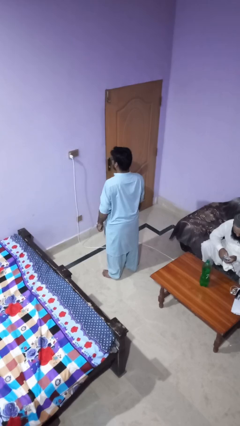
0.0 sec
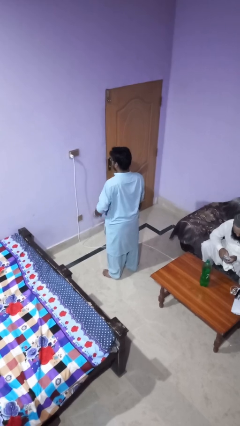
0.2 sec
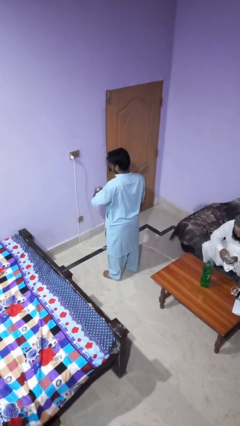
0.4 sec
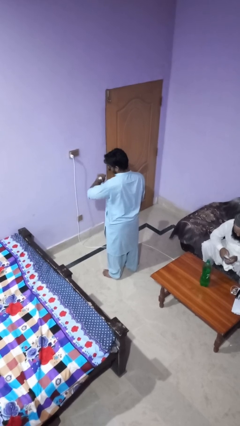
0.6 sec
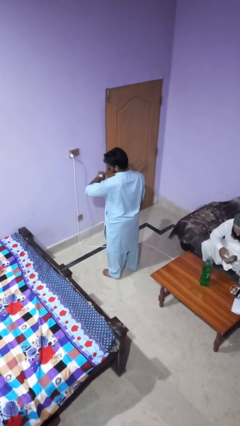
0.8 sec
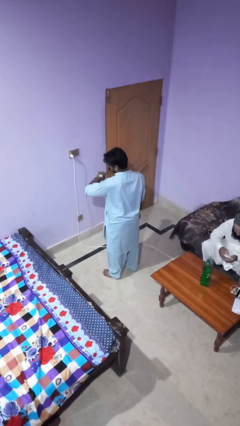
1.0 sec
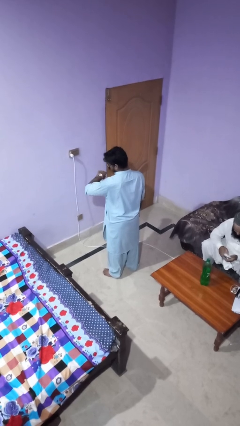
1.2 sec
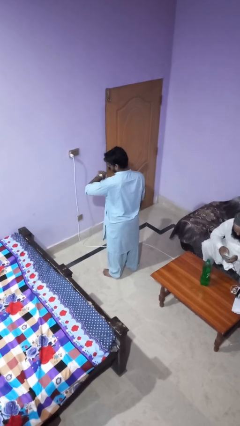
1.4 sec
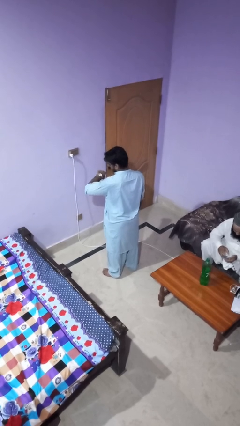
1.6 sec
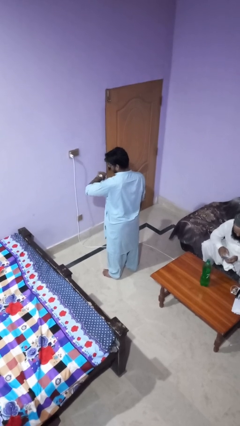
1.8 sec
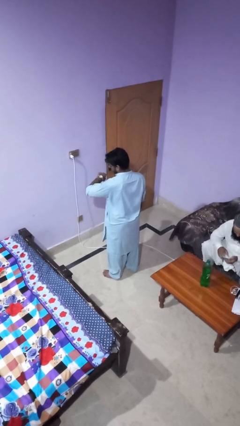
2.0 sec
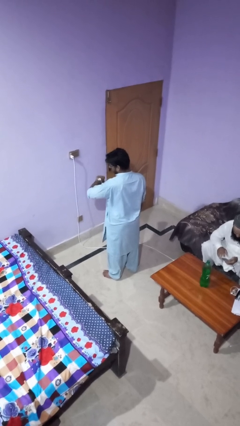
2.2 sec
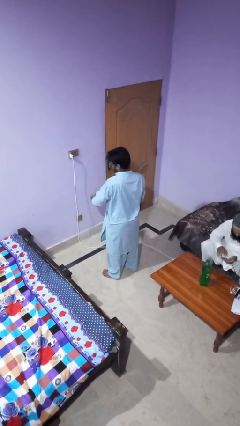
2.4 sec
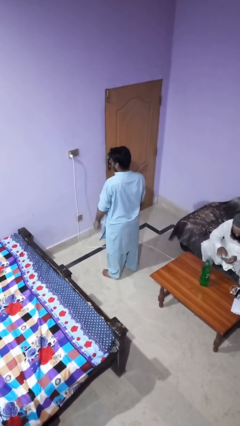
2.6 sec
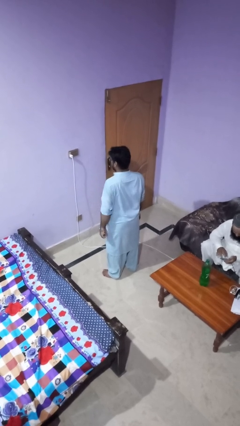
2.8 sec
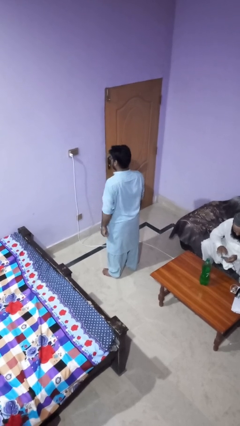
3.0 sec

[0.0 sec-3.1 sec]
person looks at wristwatch

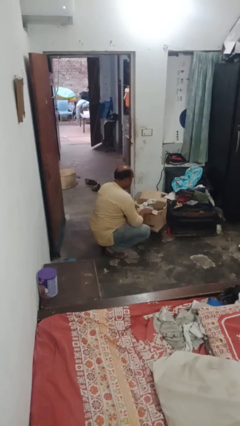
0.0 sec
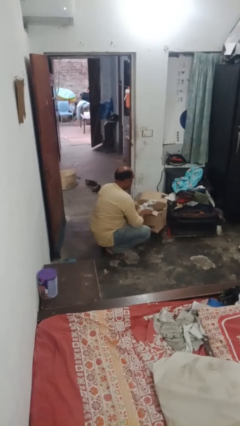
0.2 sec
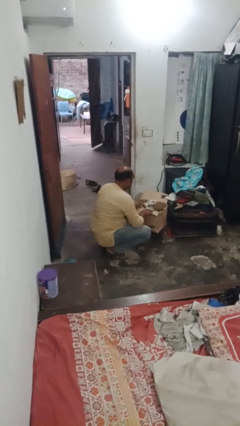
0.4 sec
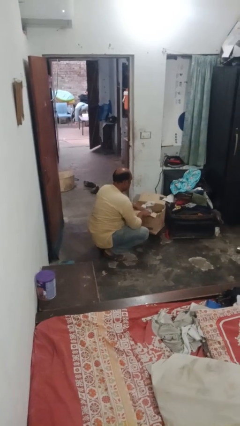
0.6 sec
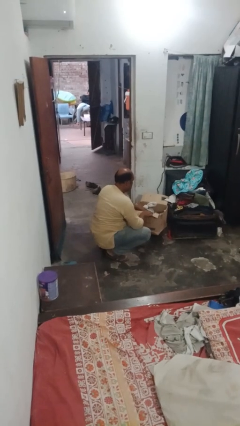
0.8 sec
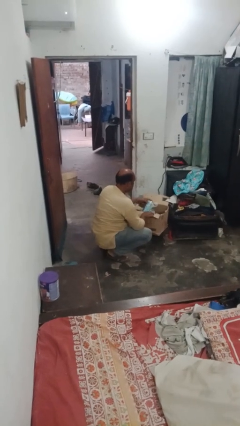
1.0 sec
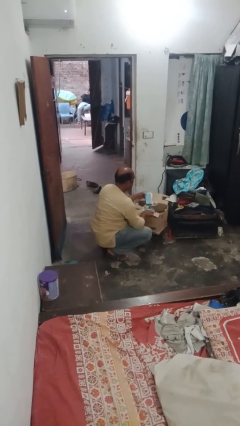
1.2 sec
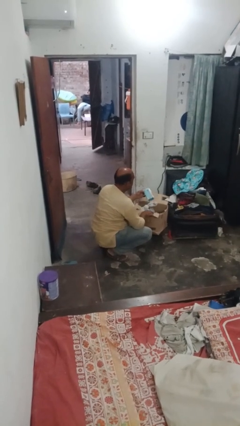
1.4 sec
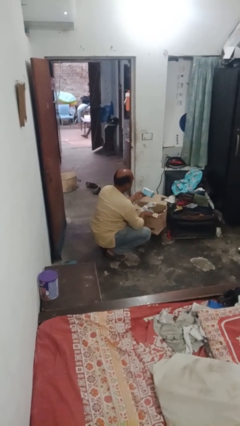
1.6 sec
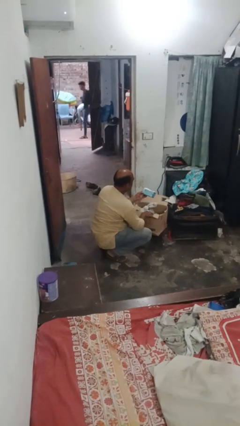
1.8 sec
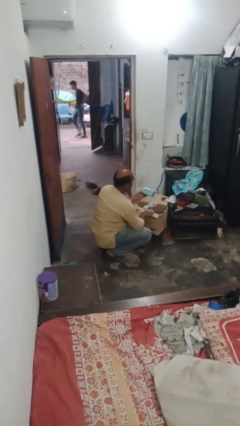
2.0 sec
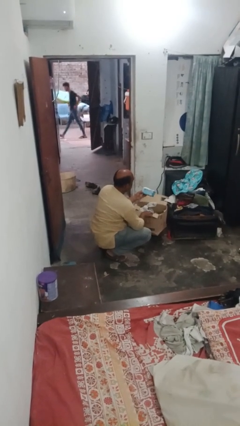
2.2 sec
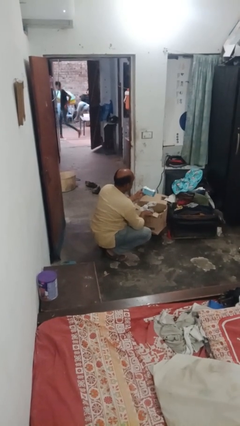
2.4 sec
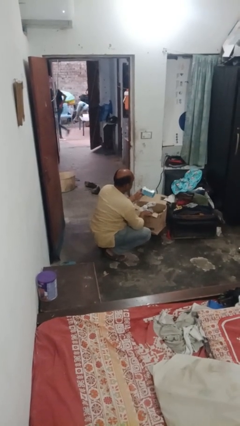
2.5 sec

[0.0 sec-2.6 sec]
person takes object from box

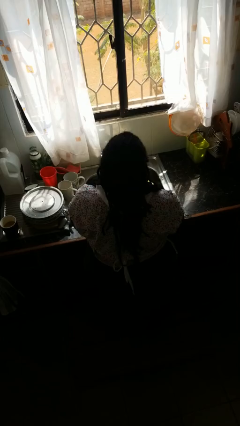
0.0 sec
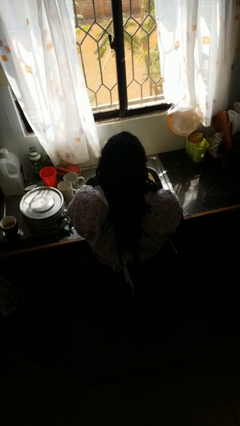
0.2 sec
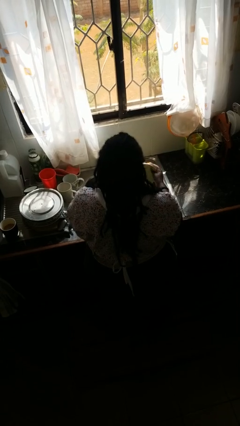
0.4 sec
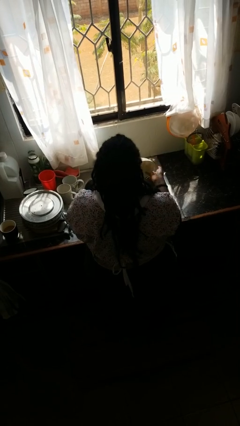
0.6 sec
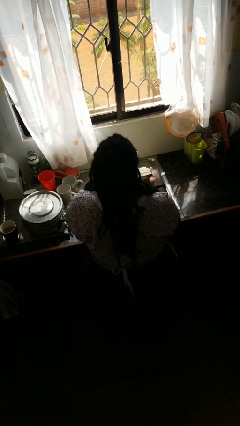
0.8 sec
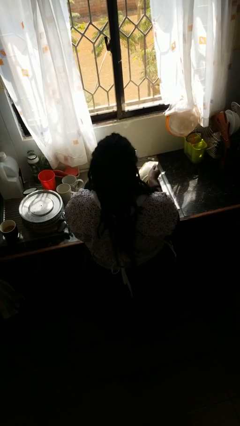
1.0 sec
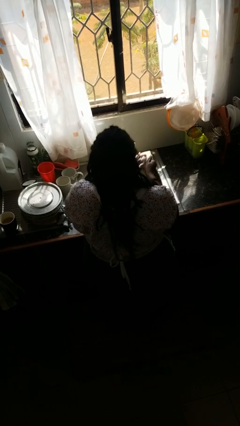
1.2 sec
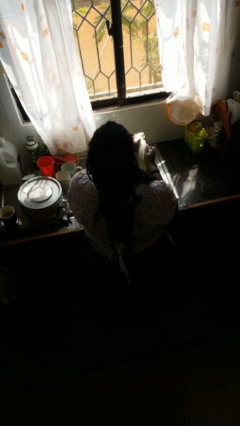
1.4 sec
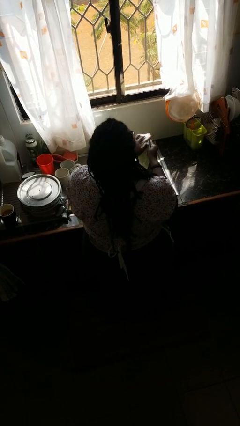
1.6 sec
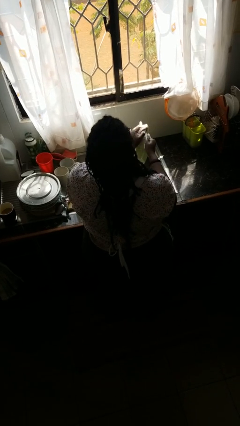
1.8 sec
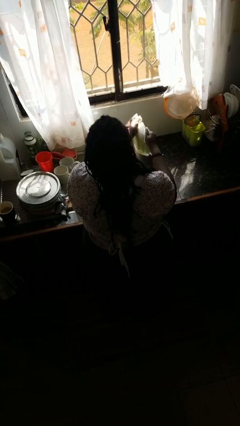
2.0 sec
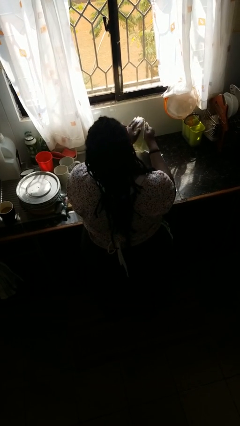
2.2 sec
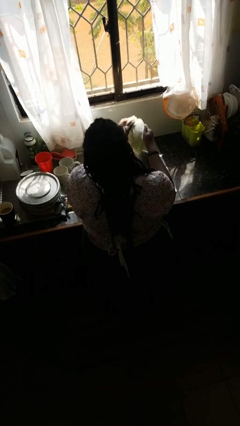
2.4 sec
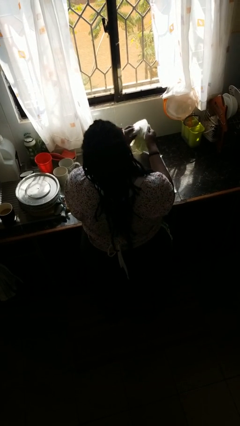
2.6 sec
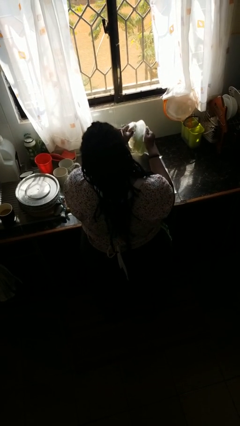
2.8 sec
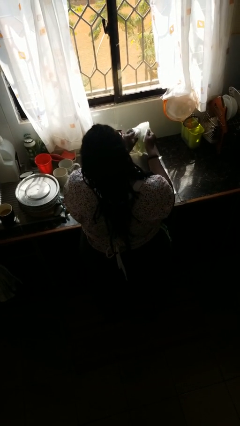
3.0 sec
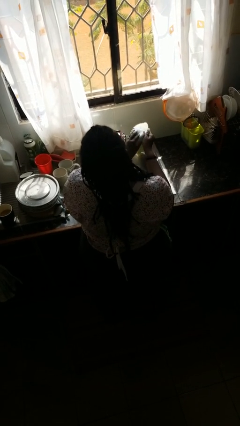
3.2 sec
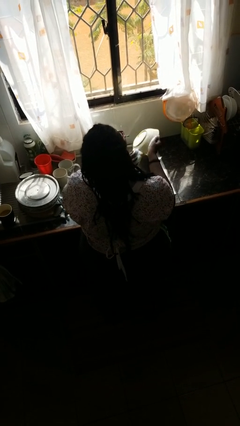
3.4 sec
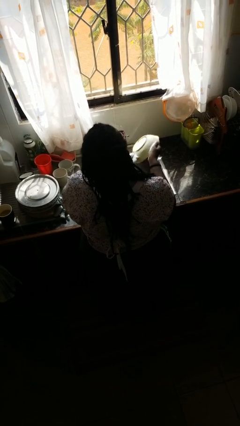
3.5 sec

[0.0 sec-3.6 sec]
person washes dish

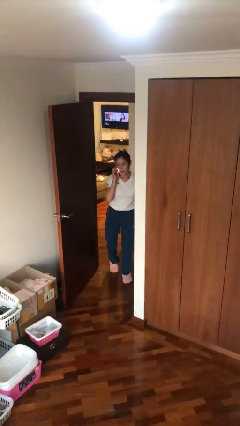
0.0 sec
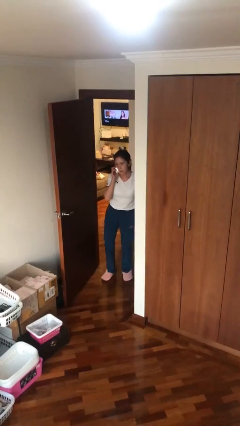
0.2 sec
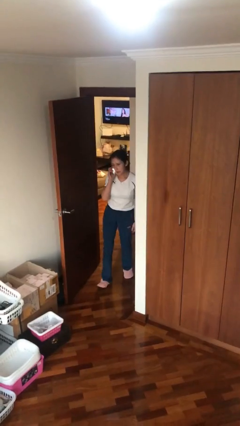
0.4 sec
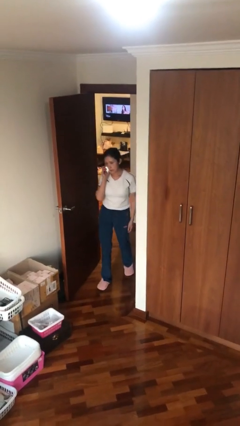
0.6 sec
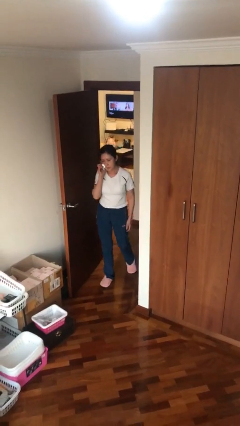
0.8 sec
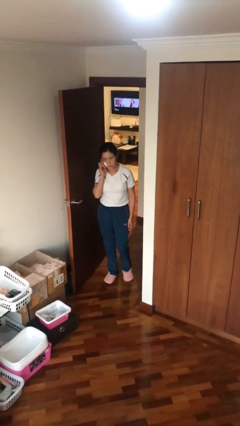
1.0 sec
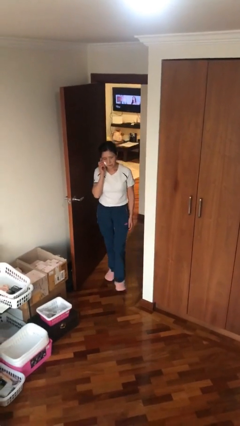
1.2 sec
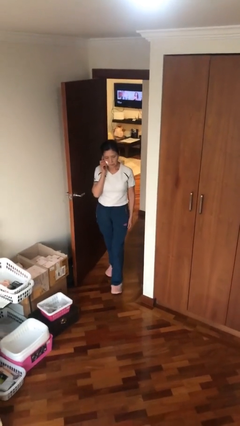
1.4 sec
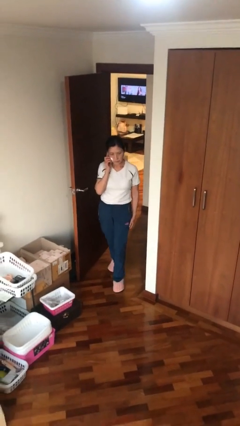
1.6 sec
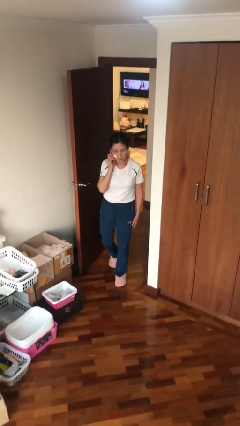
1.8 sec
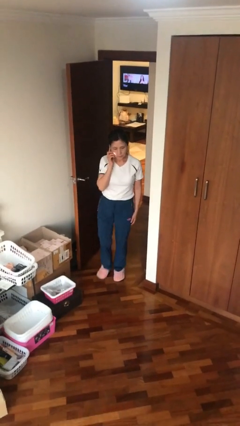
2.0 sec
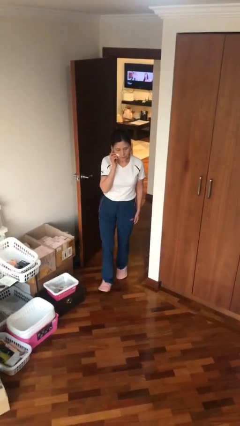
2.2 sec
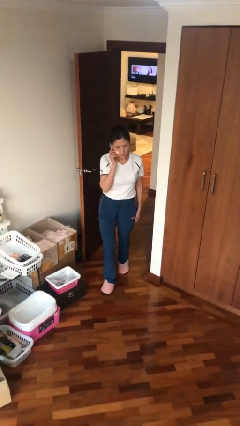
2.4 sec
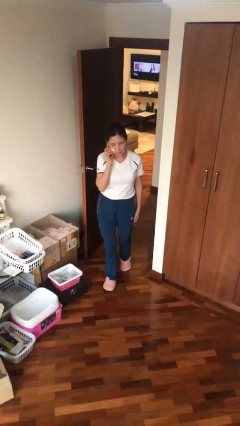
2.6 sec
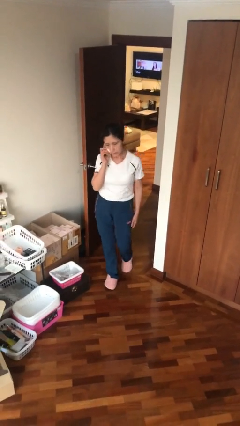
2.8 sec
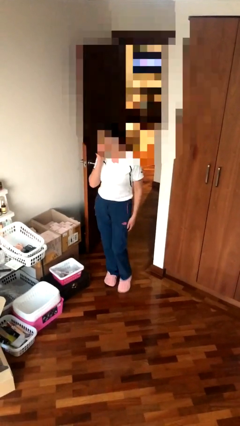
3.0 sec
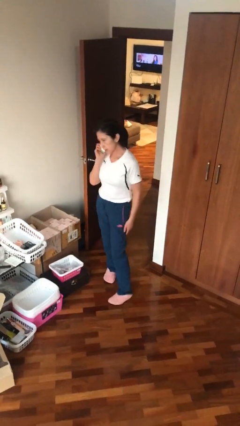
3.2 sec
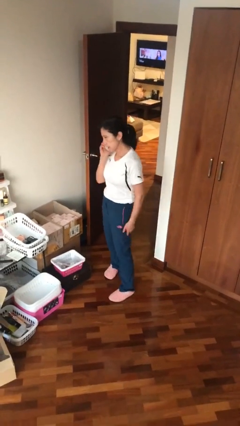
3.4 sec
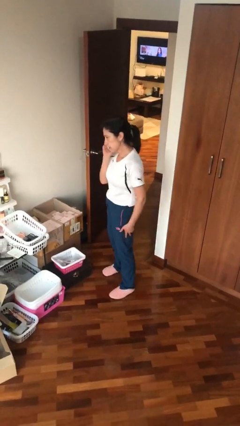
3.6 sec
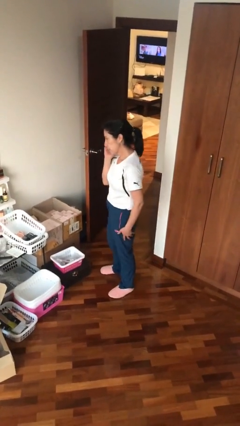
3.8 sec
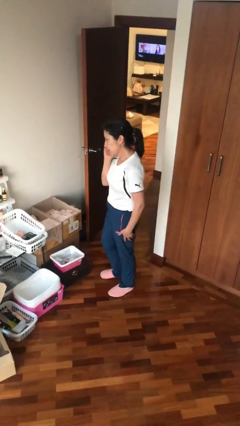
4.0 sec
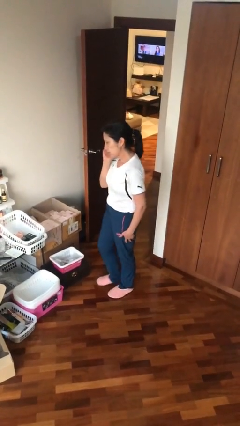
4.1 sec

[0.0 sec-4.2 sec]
person enters scene through structure

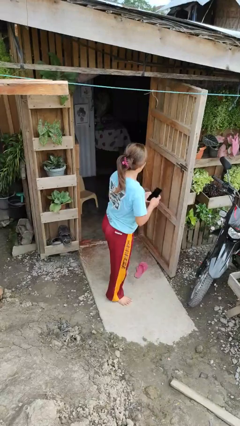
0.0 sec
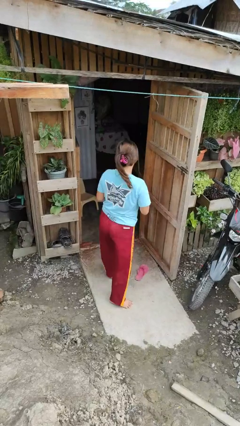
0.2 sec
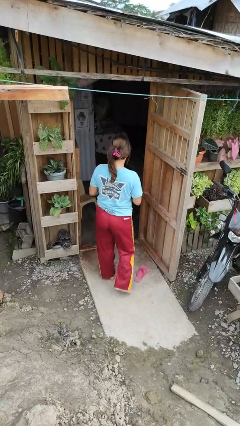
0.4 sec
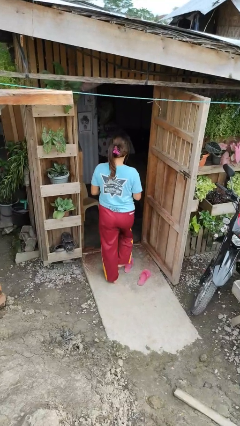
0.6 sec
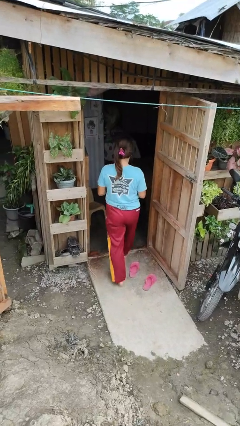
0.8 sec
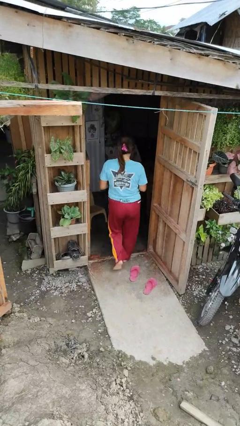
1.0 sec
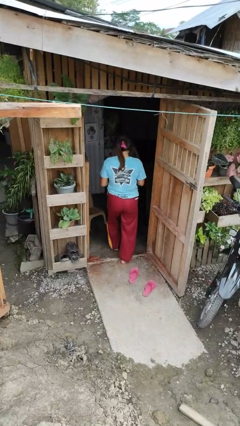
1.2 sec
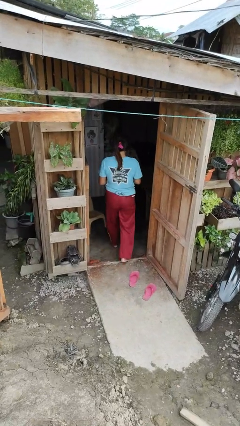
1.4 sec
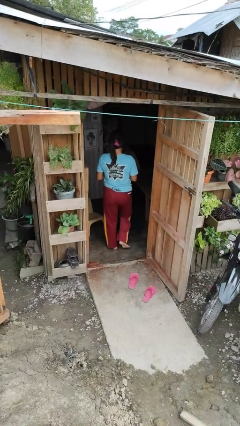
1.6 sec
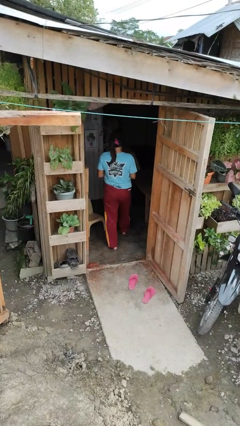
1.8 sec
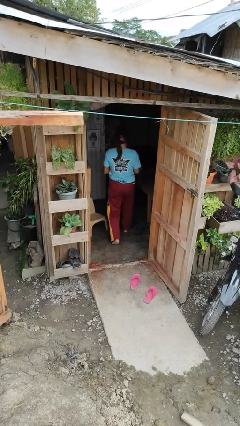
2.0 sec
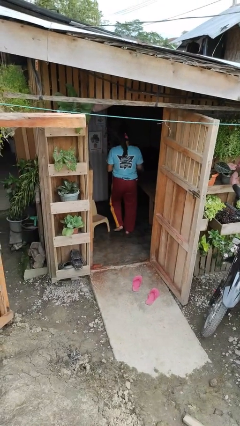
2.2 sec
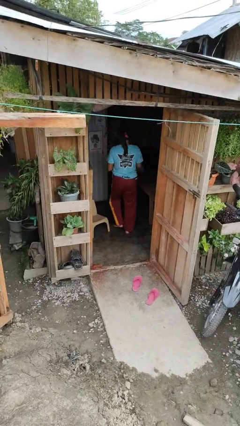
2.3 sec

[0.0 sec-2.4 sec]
person exits scene through structure

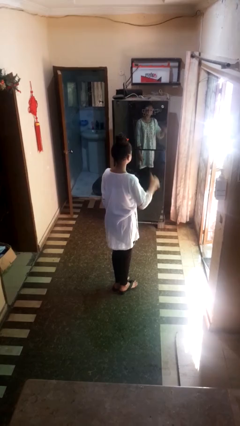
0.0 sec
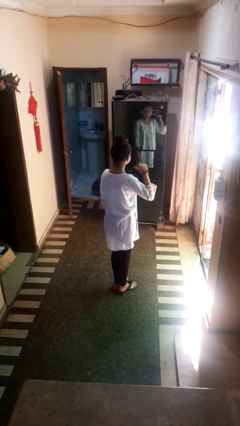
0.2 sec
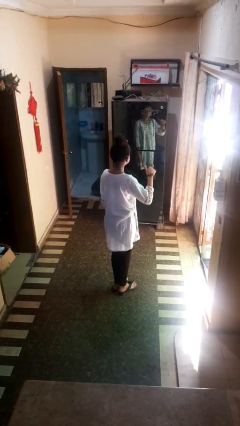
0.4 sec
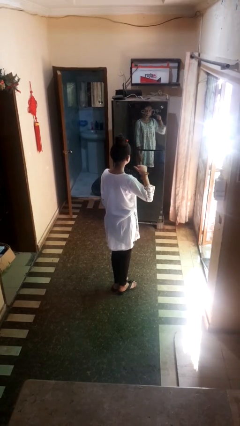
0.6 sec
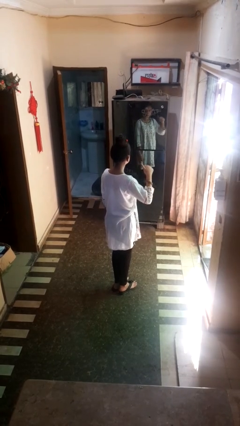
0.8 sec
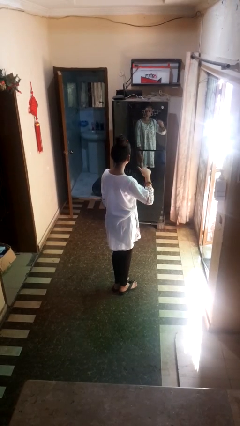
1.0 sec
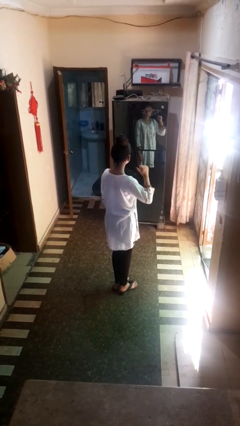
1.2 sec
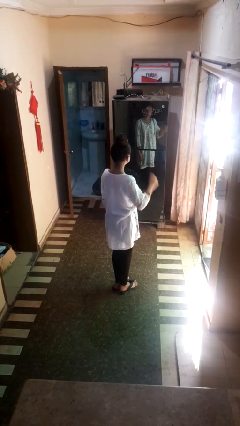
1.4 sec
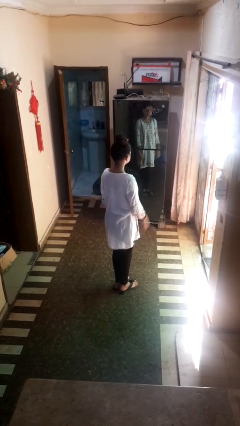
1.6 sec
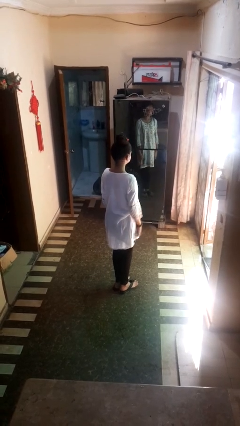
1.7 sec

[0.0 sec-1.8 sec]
person gestures behind me
